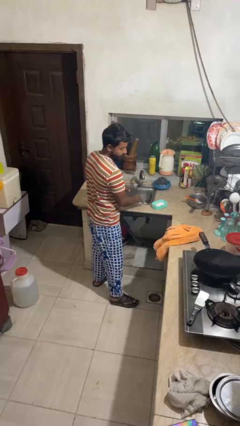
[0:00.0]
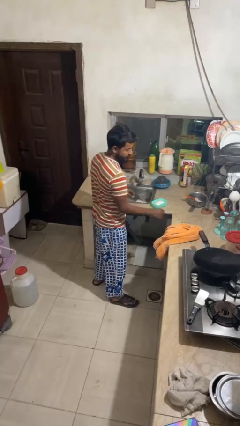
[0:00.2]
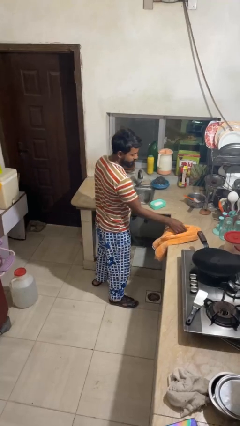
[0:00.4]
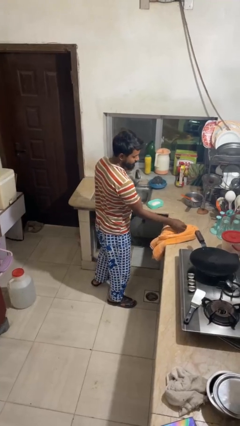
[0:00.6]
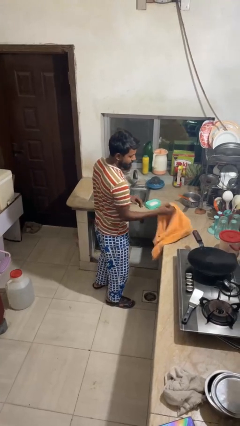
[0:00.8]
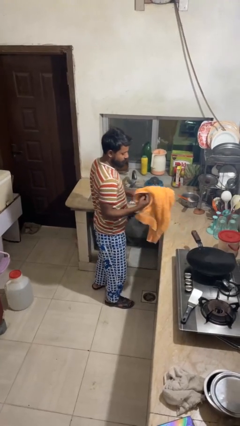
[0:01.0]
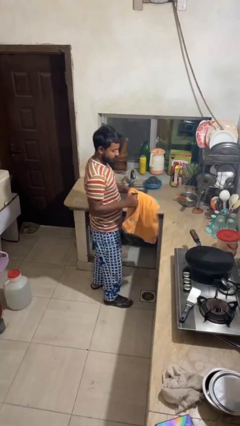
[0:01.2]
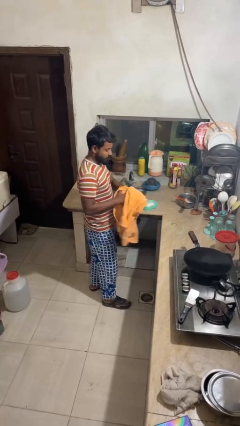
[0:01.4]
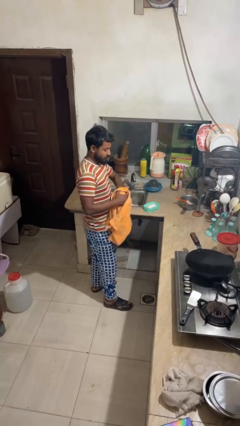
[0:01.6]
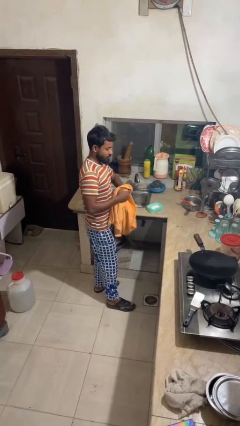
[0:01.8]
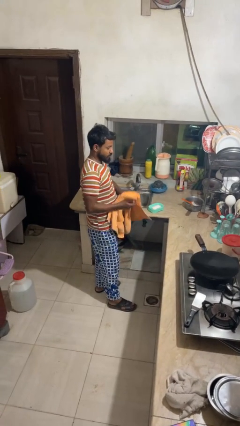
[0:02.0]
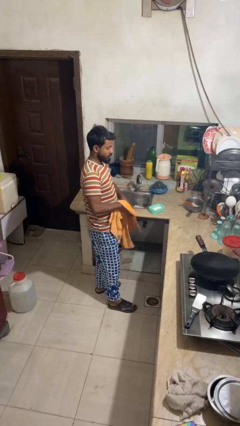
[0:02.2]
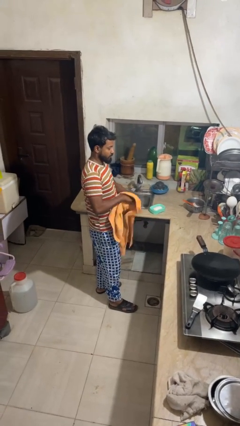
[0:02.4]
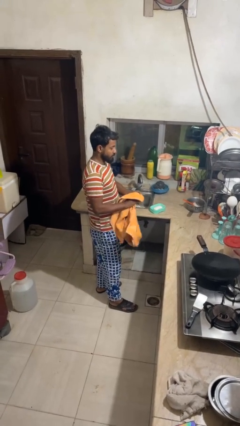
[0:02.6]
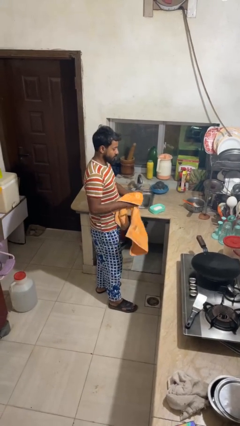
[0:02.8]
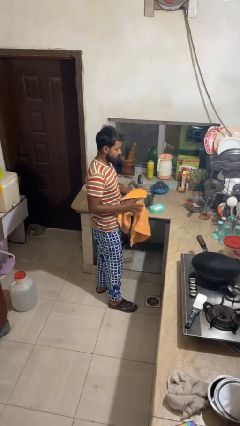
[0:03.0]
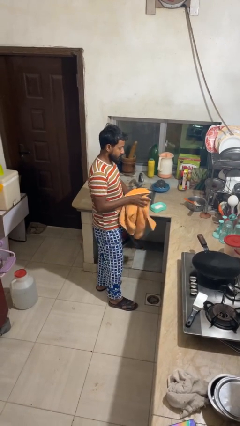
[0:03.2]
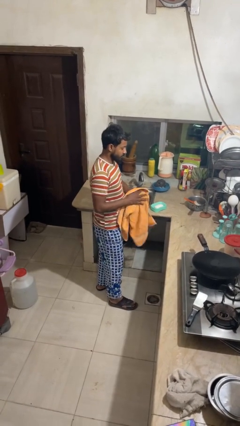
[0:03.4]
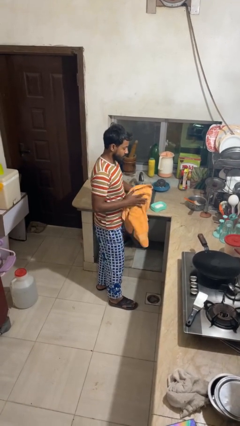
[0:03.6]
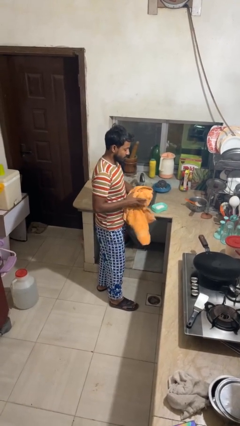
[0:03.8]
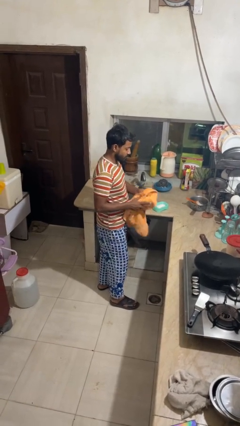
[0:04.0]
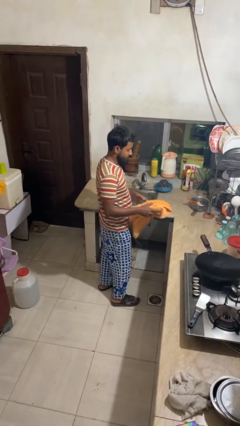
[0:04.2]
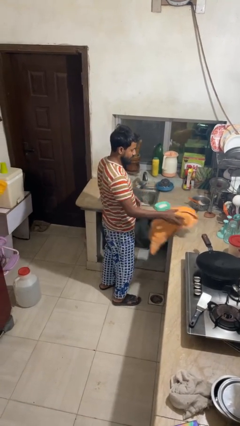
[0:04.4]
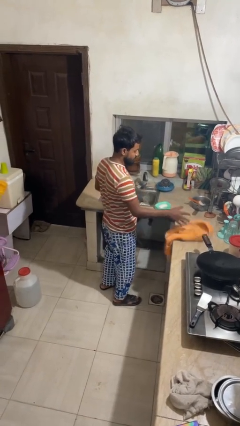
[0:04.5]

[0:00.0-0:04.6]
person dries hands with towel

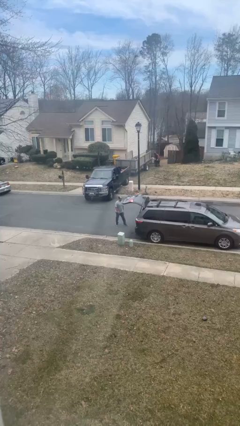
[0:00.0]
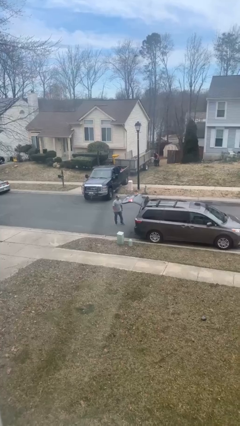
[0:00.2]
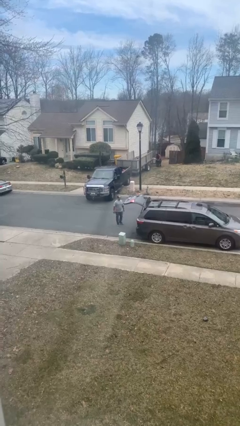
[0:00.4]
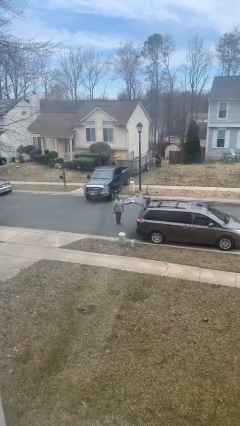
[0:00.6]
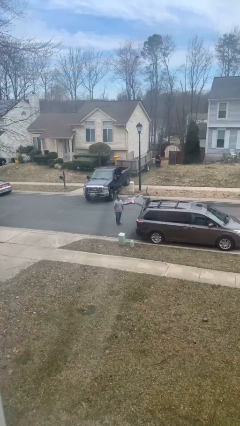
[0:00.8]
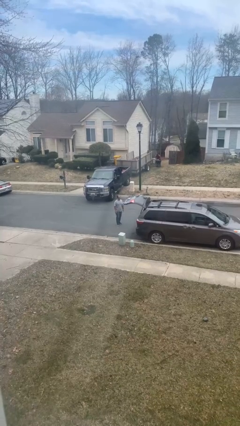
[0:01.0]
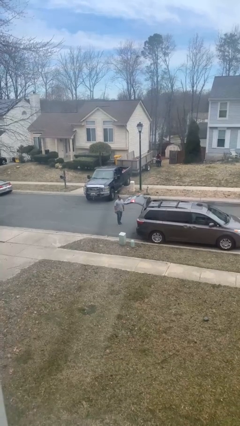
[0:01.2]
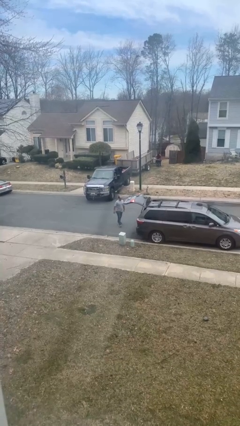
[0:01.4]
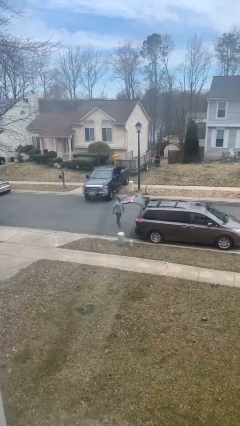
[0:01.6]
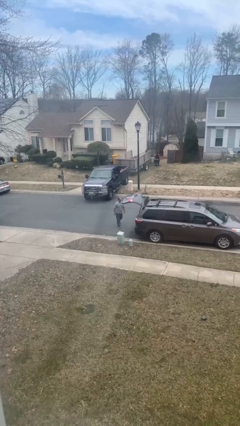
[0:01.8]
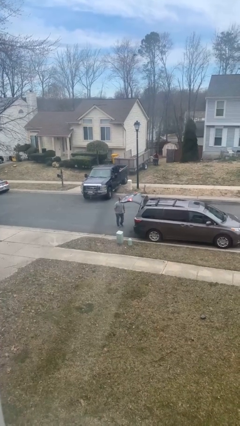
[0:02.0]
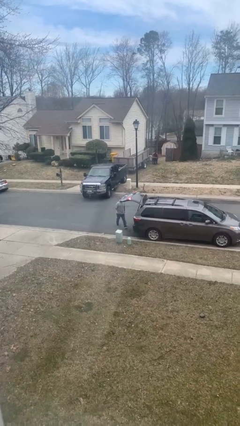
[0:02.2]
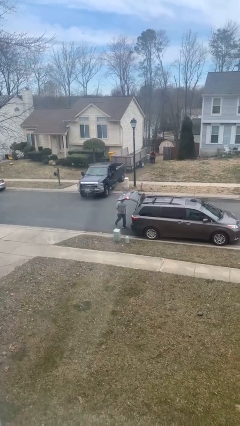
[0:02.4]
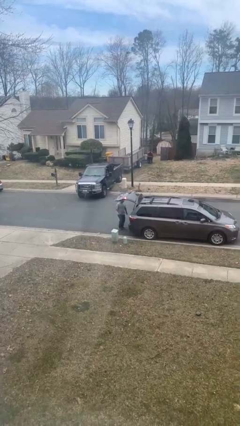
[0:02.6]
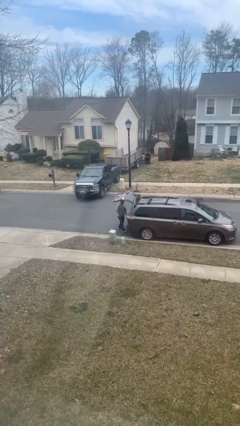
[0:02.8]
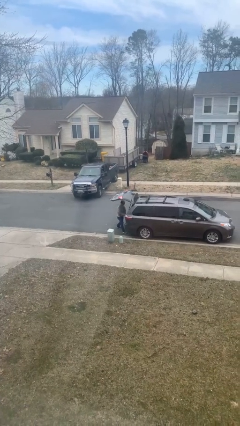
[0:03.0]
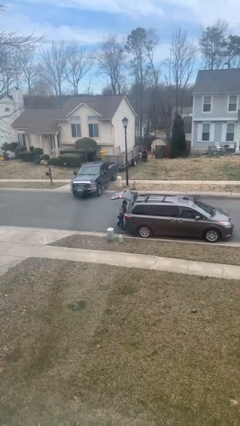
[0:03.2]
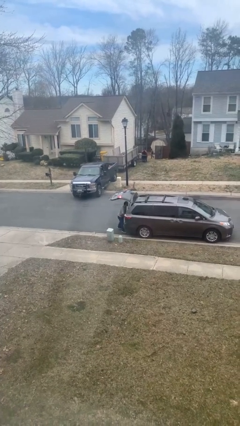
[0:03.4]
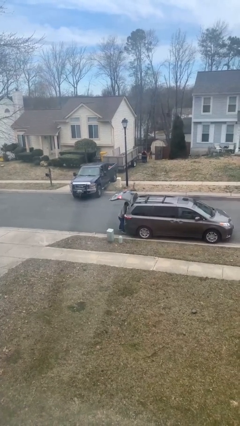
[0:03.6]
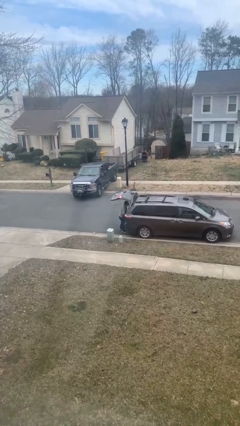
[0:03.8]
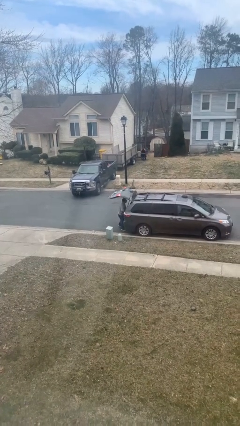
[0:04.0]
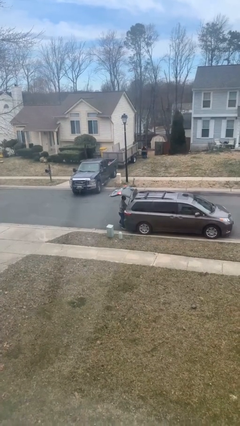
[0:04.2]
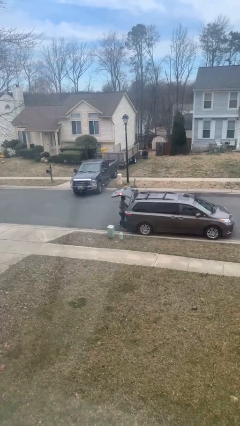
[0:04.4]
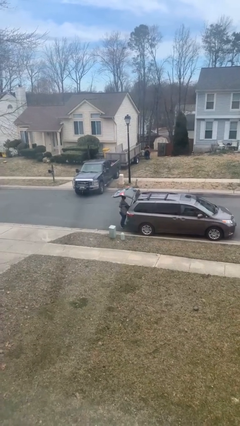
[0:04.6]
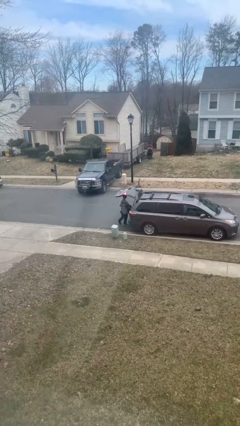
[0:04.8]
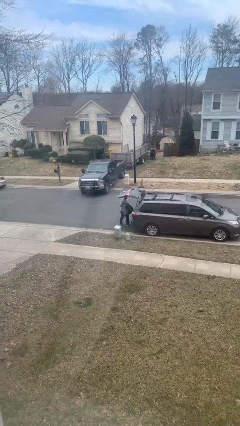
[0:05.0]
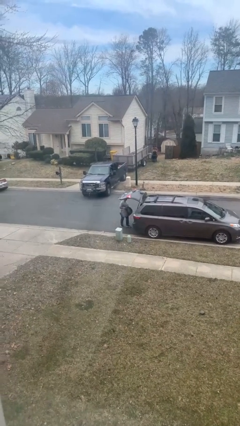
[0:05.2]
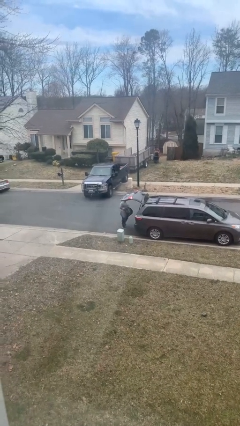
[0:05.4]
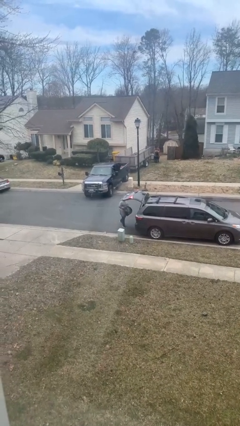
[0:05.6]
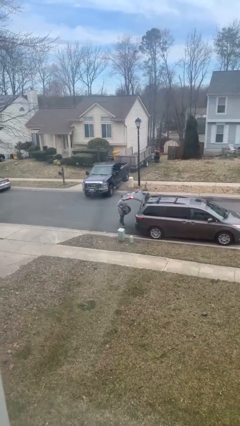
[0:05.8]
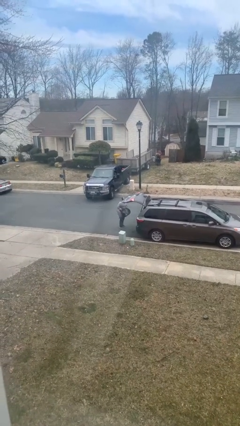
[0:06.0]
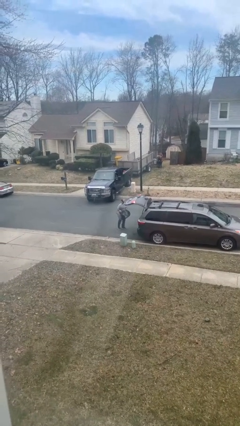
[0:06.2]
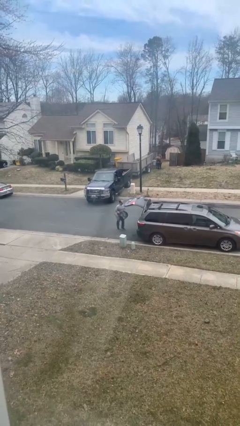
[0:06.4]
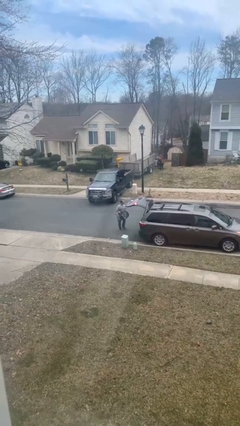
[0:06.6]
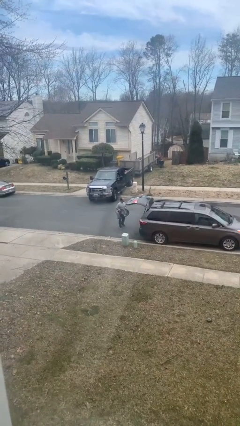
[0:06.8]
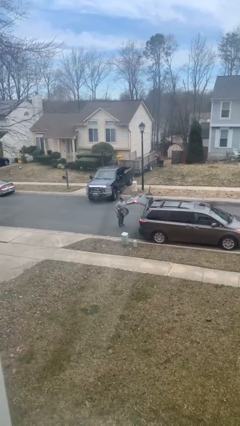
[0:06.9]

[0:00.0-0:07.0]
person unloads car

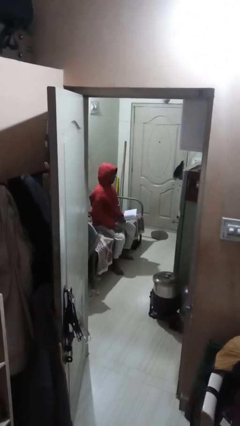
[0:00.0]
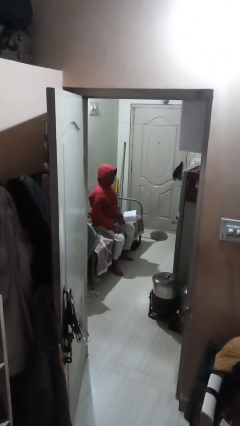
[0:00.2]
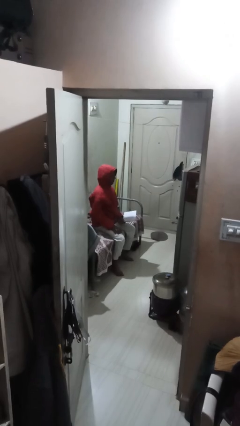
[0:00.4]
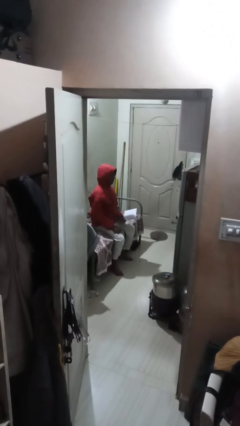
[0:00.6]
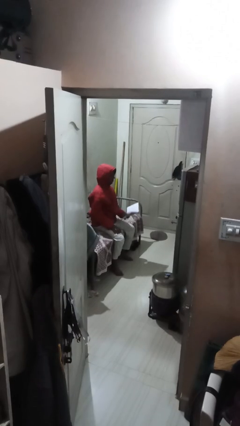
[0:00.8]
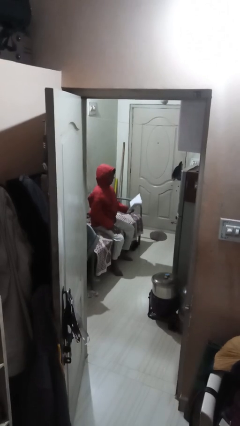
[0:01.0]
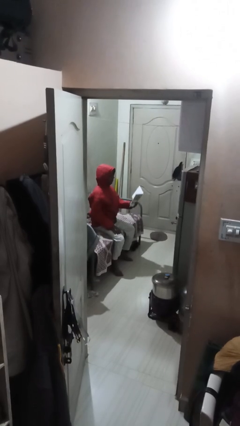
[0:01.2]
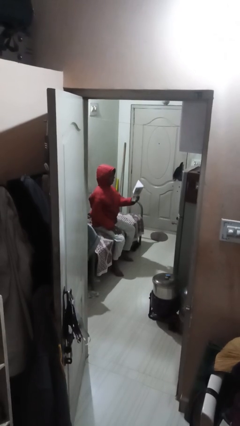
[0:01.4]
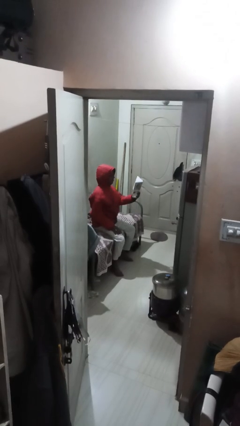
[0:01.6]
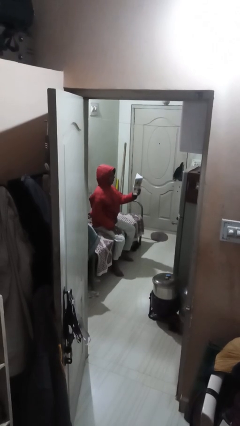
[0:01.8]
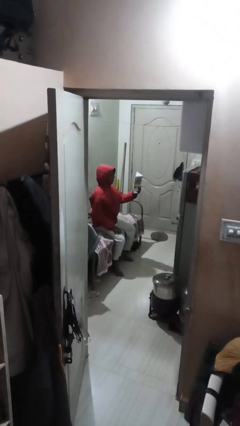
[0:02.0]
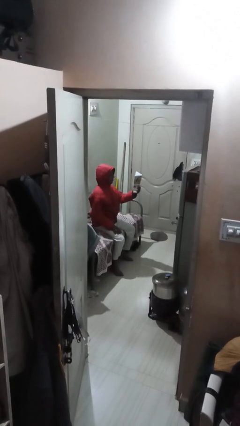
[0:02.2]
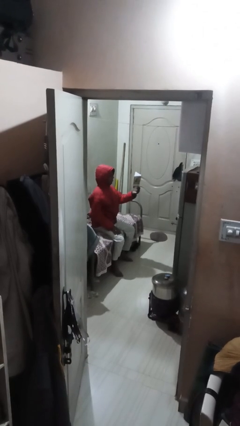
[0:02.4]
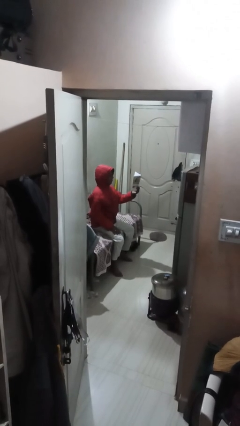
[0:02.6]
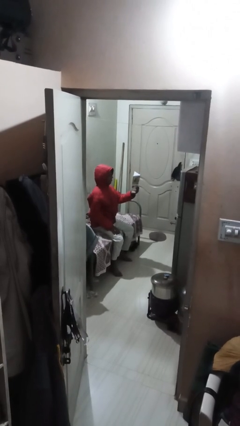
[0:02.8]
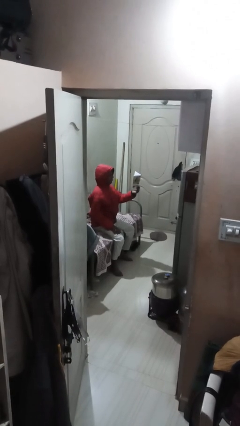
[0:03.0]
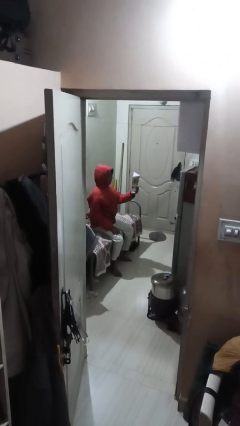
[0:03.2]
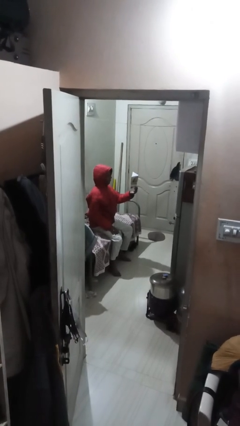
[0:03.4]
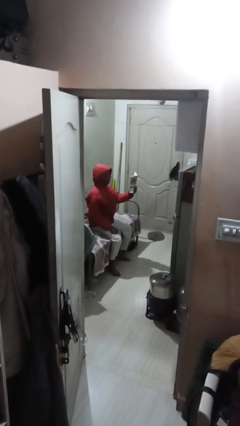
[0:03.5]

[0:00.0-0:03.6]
person reads document

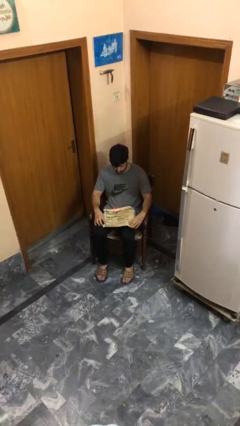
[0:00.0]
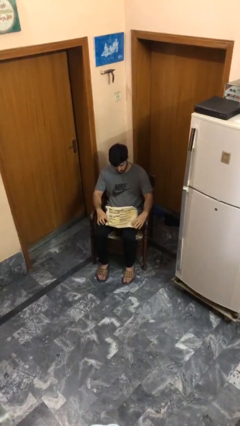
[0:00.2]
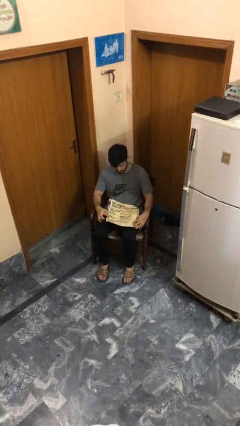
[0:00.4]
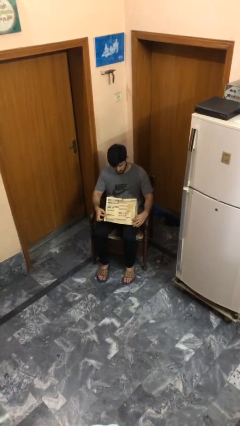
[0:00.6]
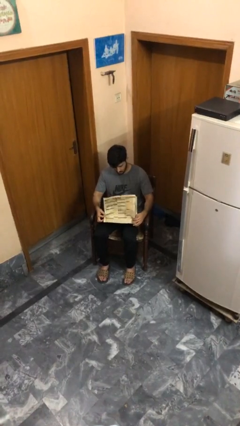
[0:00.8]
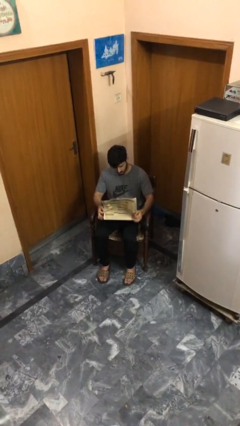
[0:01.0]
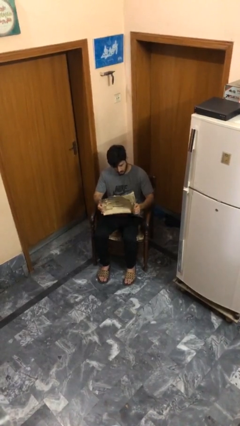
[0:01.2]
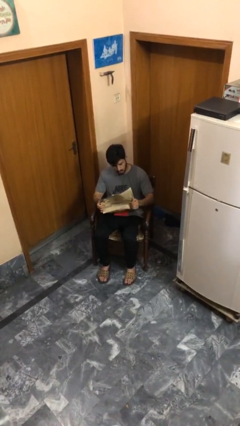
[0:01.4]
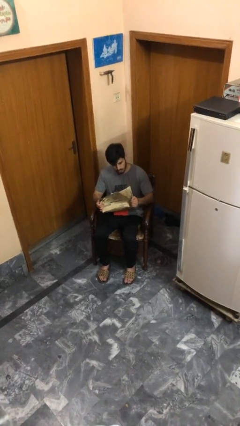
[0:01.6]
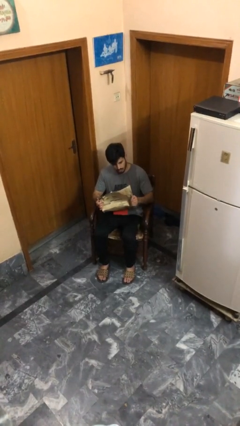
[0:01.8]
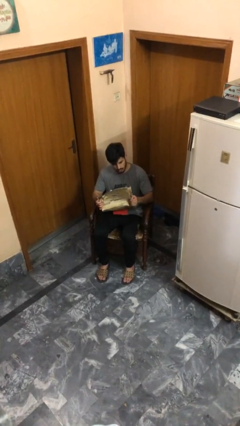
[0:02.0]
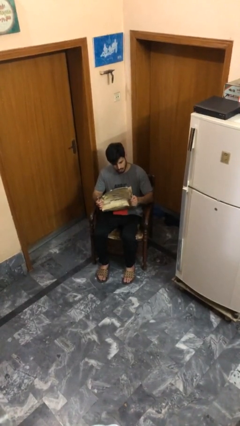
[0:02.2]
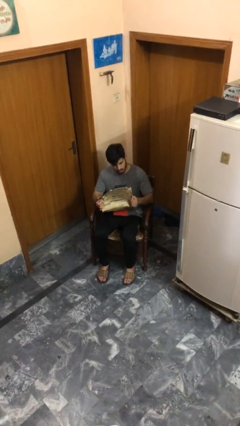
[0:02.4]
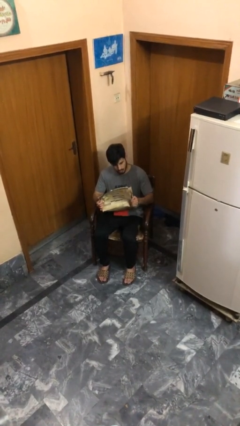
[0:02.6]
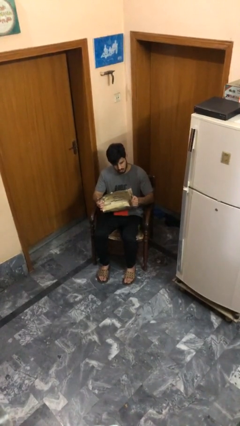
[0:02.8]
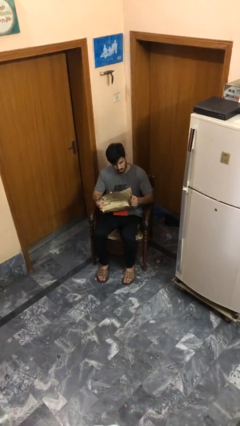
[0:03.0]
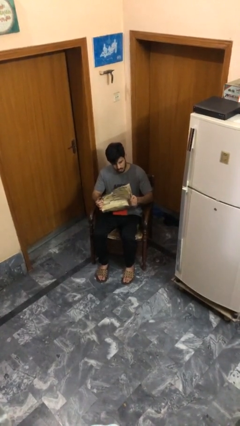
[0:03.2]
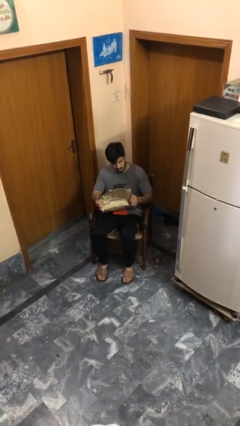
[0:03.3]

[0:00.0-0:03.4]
person reads newspaper
